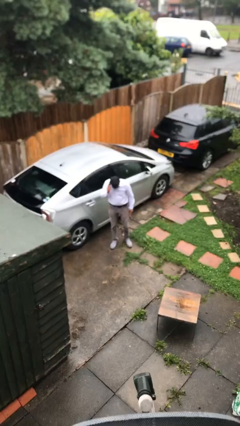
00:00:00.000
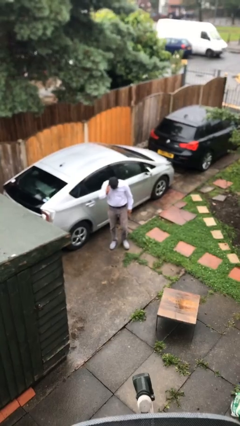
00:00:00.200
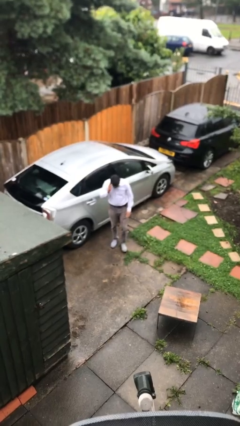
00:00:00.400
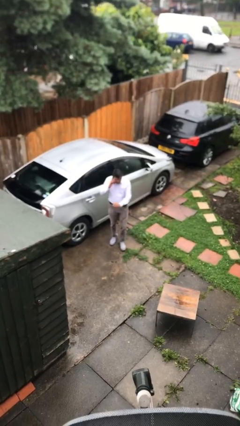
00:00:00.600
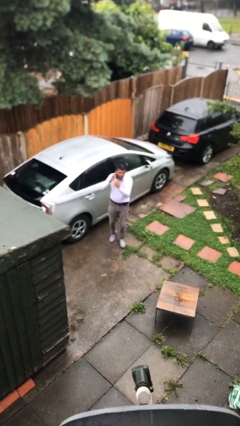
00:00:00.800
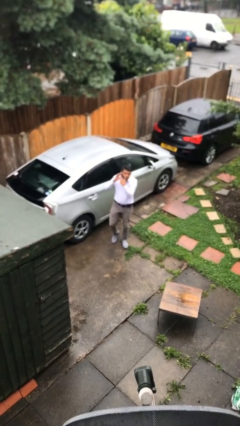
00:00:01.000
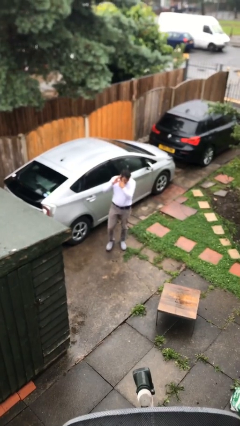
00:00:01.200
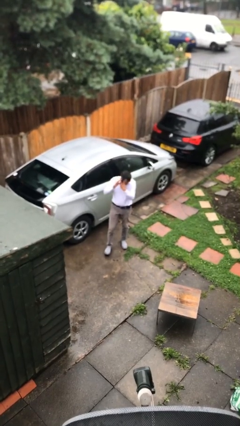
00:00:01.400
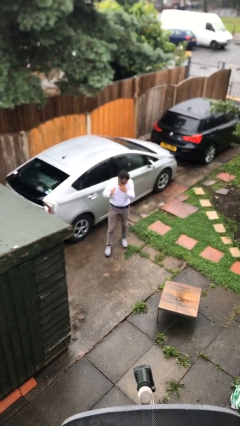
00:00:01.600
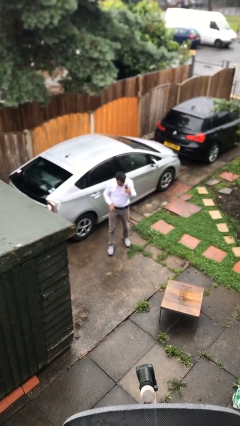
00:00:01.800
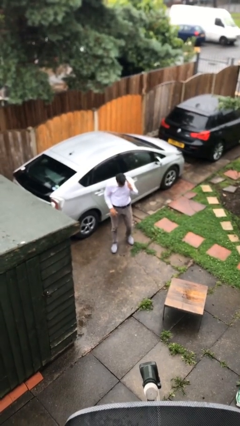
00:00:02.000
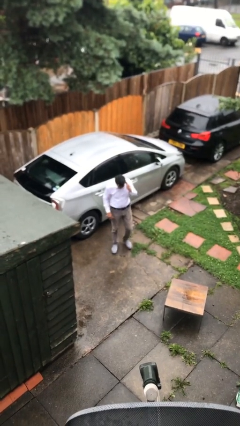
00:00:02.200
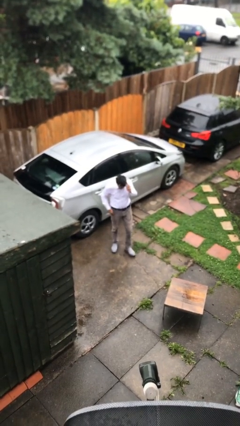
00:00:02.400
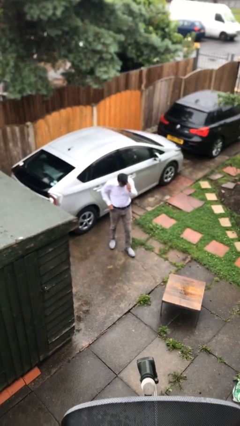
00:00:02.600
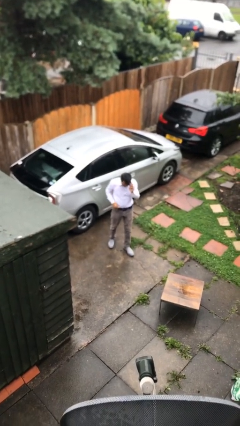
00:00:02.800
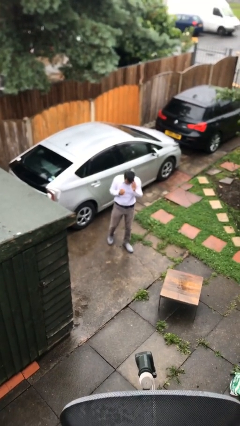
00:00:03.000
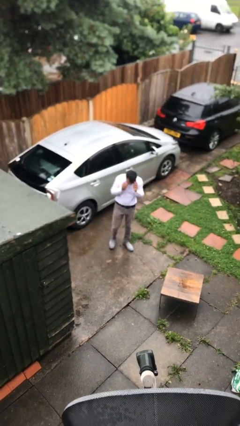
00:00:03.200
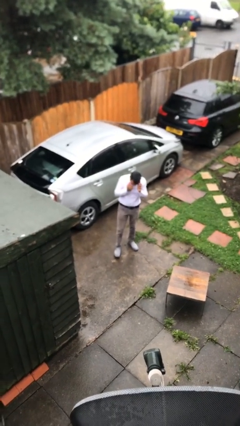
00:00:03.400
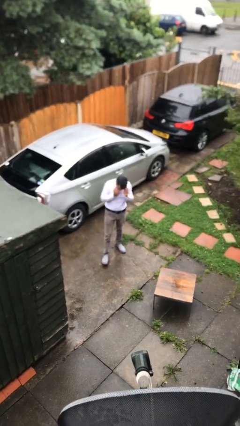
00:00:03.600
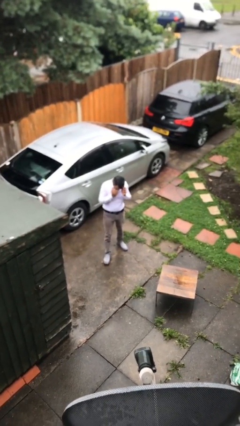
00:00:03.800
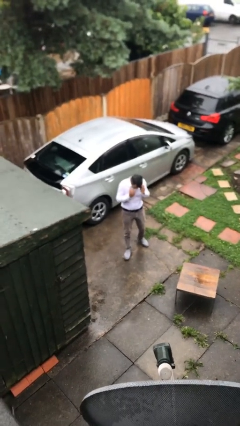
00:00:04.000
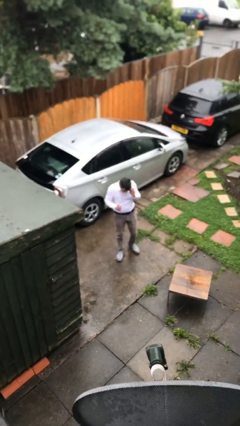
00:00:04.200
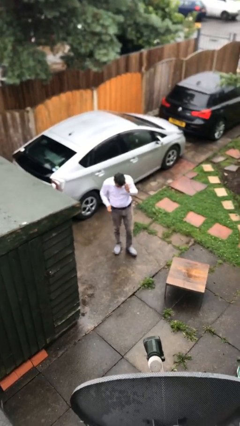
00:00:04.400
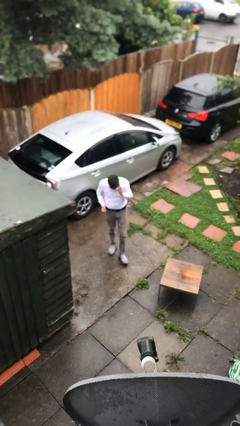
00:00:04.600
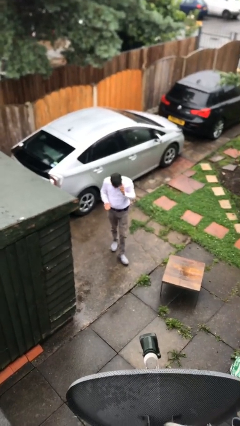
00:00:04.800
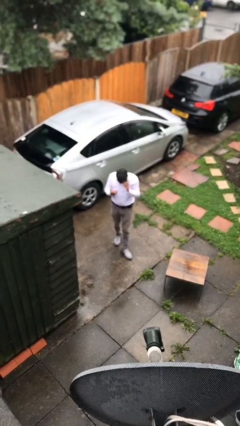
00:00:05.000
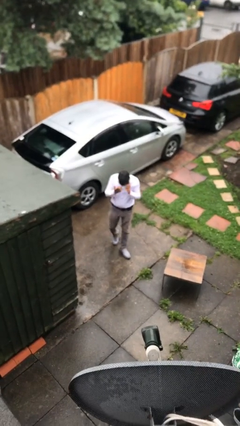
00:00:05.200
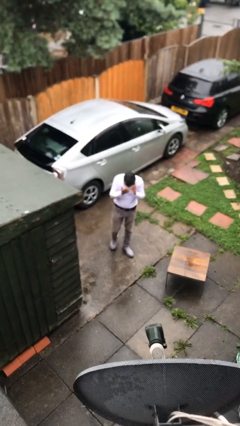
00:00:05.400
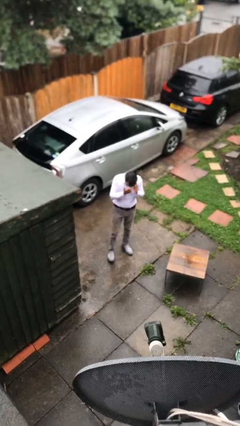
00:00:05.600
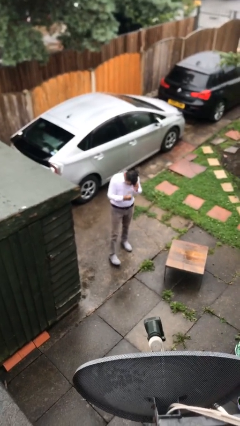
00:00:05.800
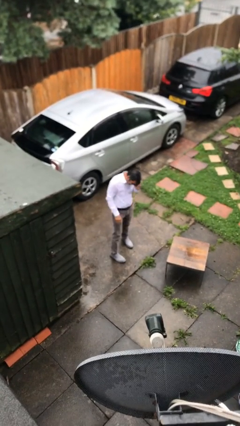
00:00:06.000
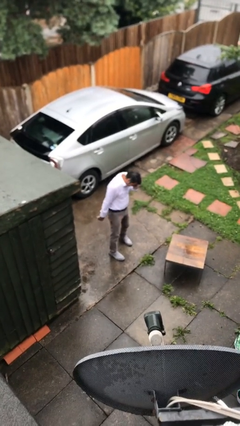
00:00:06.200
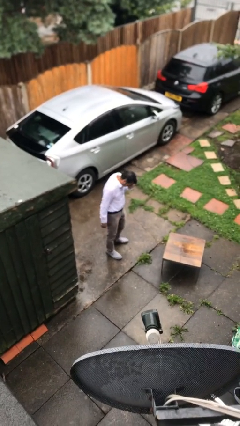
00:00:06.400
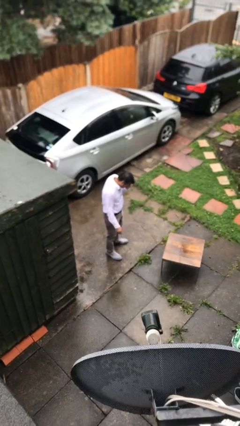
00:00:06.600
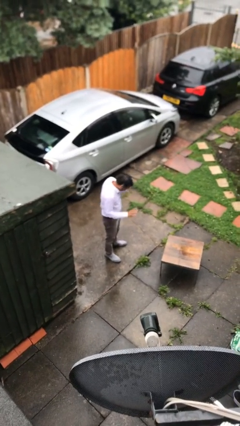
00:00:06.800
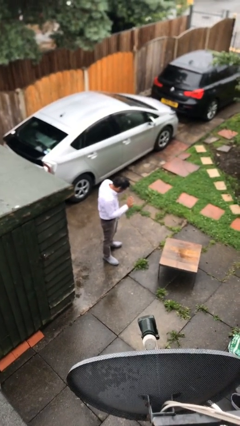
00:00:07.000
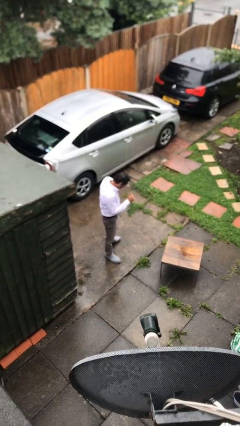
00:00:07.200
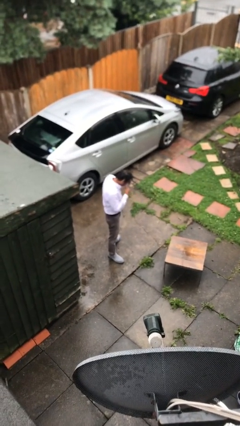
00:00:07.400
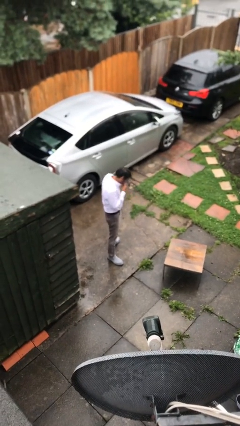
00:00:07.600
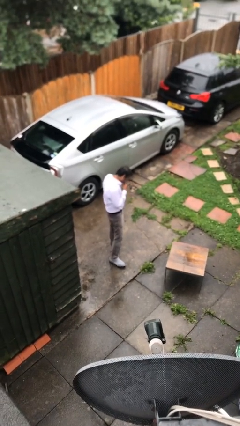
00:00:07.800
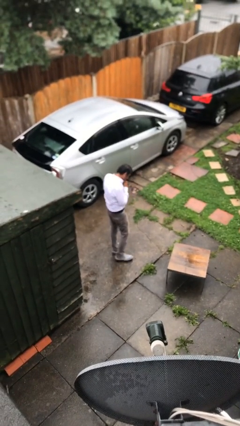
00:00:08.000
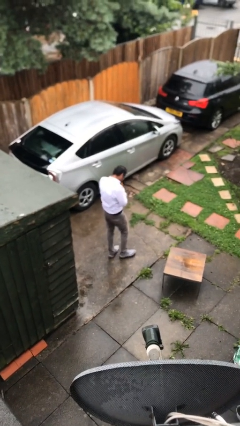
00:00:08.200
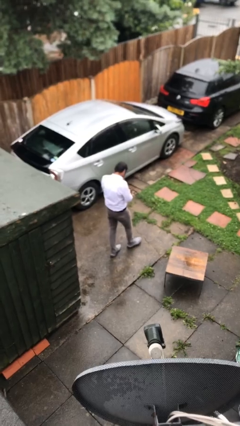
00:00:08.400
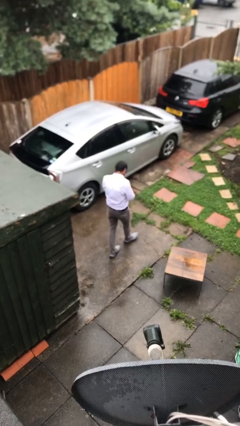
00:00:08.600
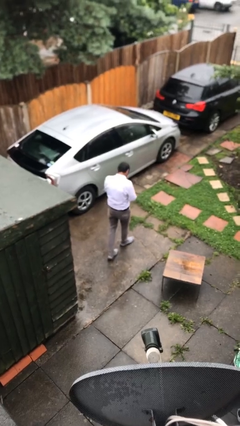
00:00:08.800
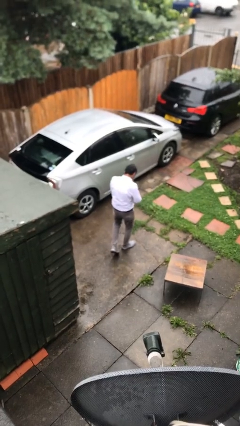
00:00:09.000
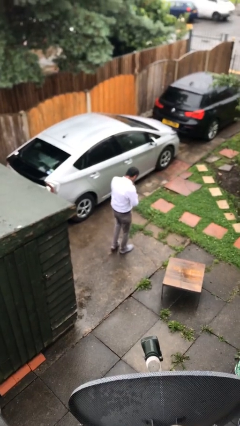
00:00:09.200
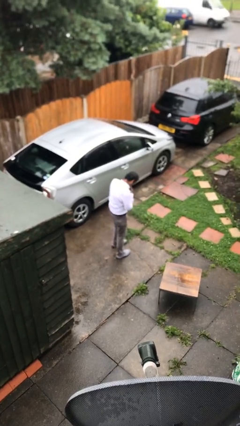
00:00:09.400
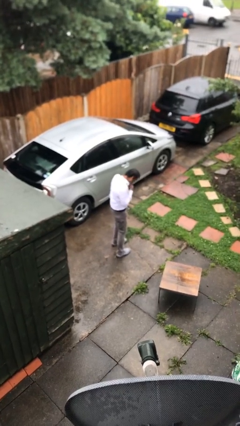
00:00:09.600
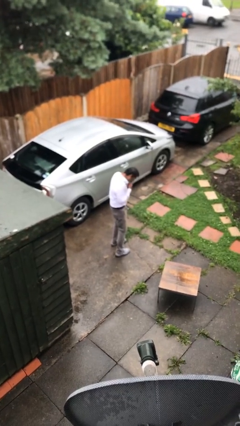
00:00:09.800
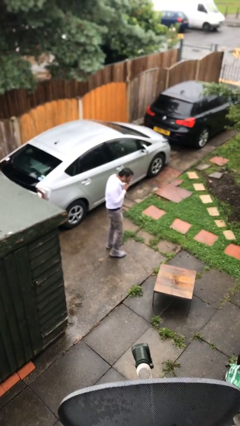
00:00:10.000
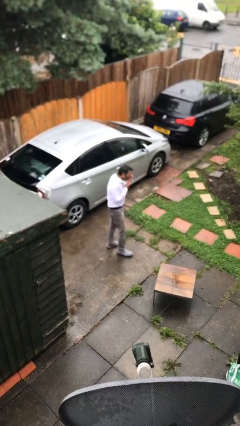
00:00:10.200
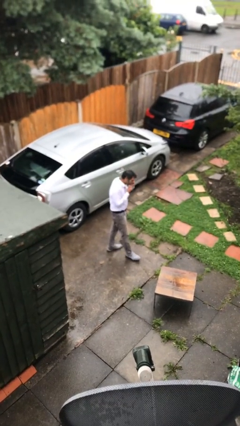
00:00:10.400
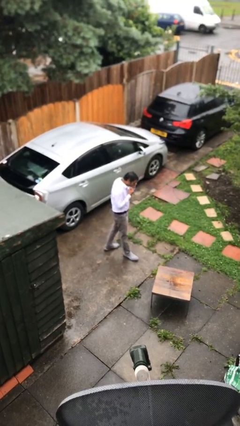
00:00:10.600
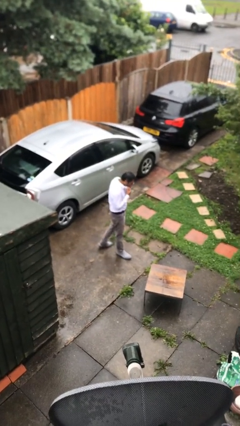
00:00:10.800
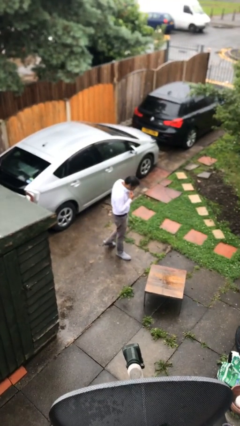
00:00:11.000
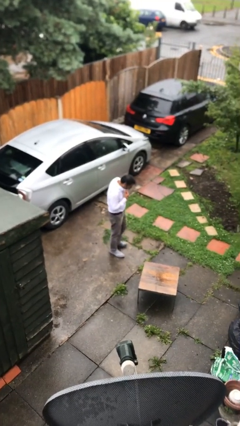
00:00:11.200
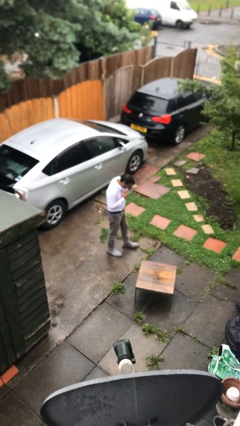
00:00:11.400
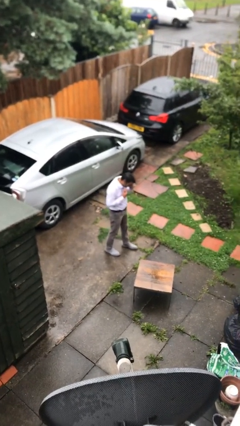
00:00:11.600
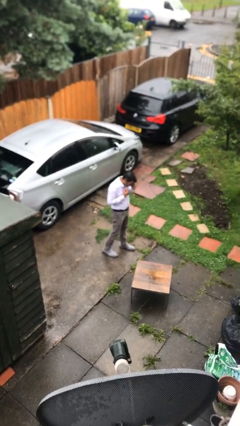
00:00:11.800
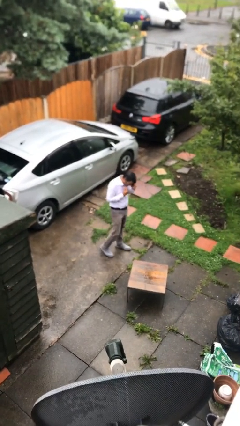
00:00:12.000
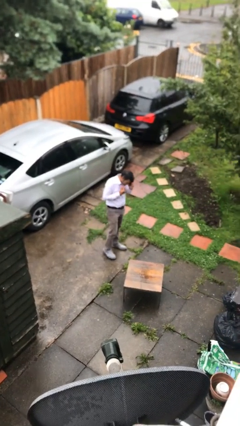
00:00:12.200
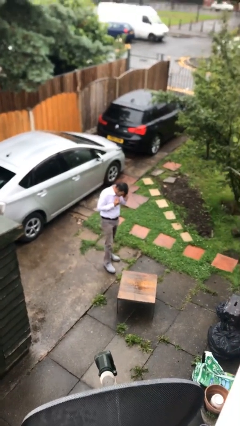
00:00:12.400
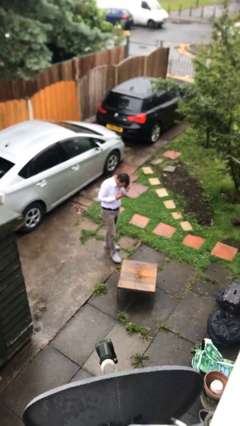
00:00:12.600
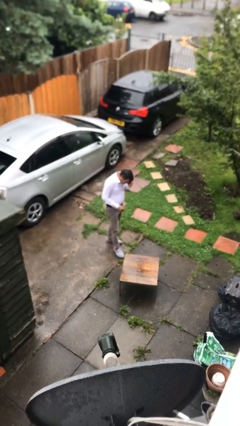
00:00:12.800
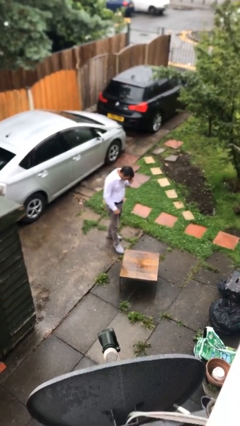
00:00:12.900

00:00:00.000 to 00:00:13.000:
person talks on phone

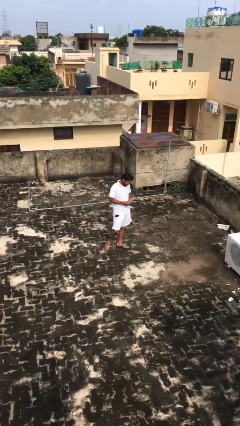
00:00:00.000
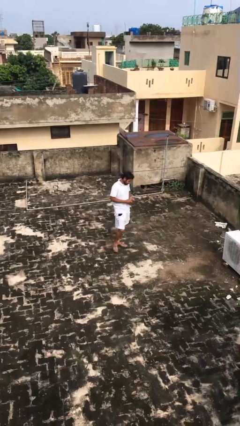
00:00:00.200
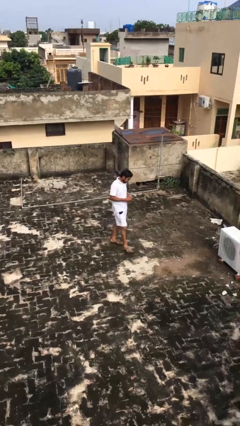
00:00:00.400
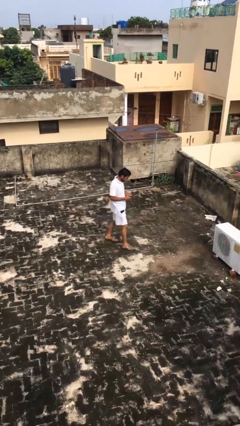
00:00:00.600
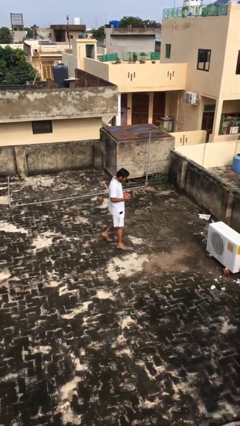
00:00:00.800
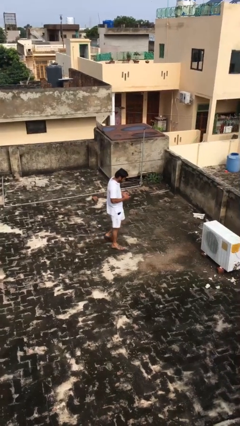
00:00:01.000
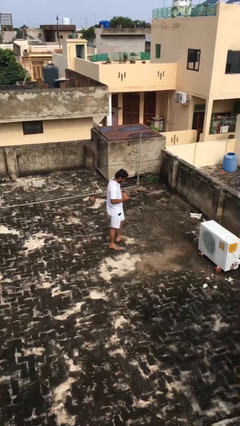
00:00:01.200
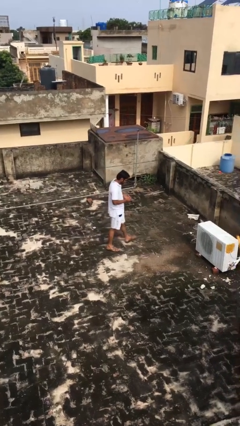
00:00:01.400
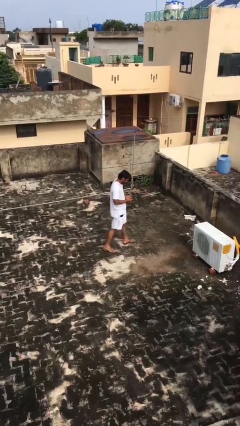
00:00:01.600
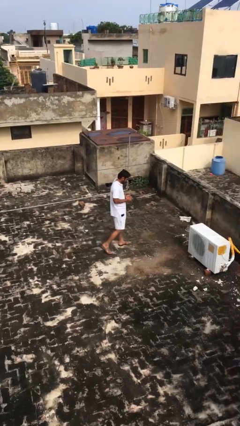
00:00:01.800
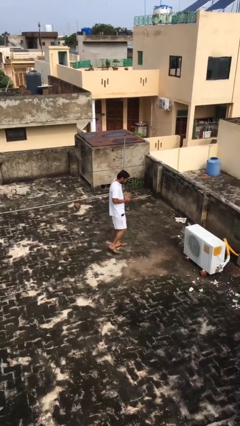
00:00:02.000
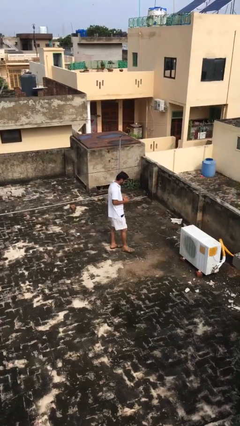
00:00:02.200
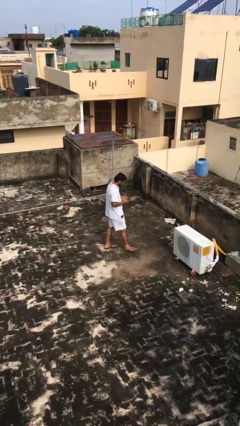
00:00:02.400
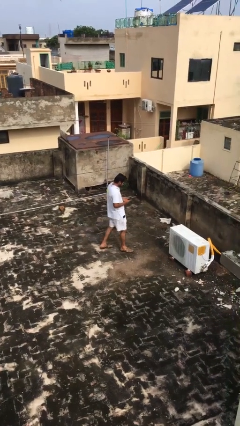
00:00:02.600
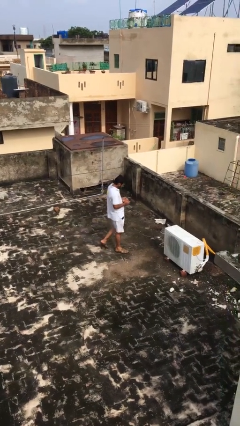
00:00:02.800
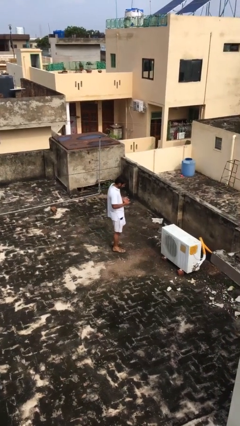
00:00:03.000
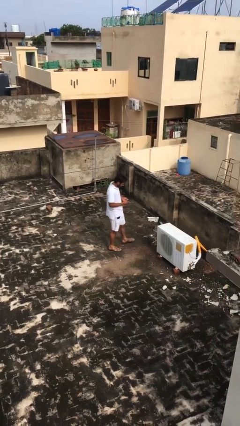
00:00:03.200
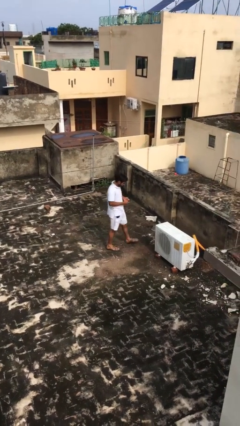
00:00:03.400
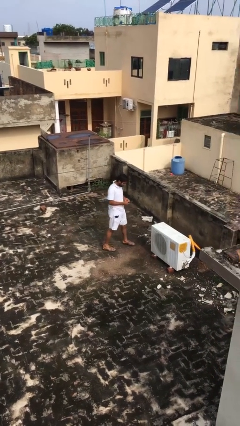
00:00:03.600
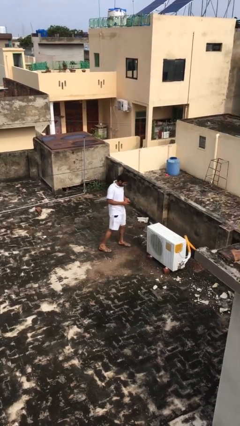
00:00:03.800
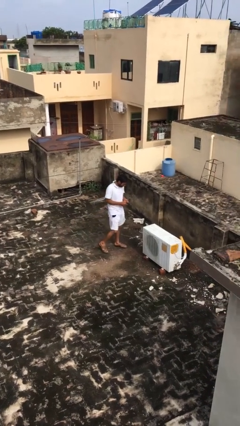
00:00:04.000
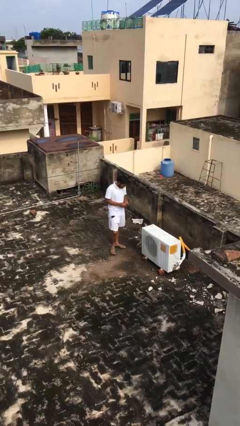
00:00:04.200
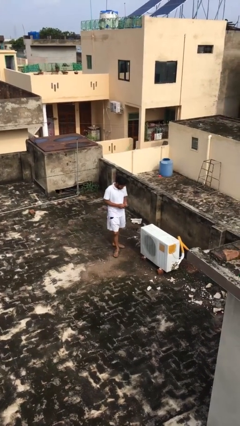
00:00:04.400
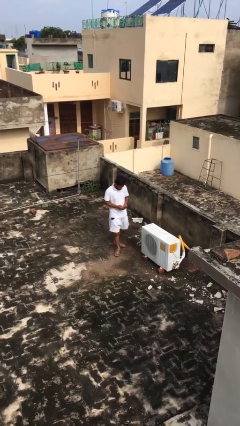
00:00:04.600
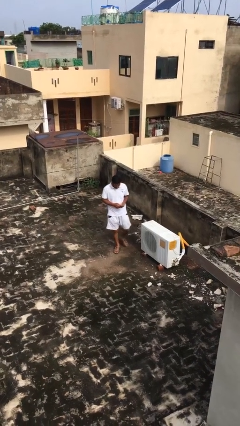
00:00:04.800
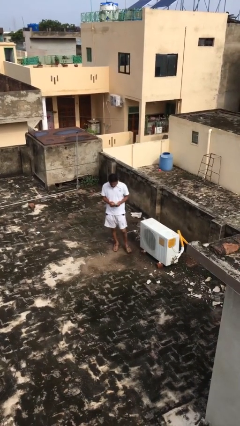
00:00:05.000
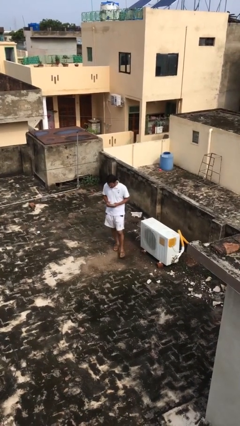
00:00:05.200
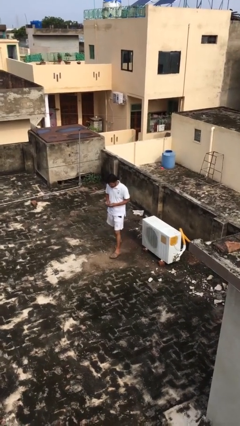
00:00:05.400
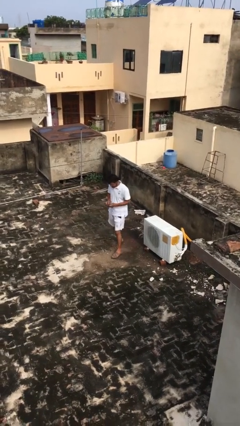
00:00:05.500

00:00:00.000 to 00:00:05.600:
person texts on phone
